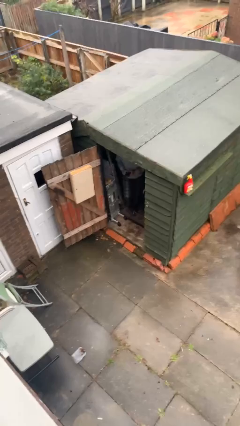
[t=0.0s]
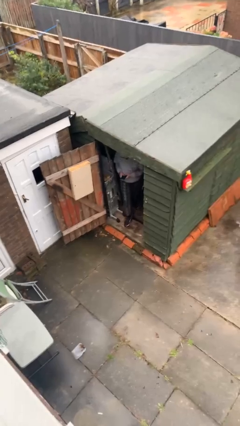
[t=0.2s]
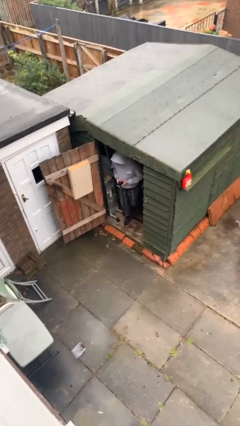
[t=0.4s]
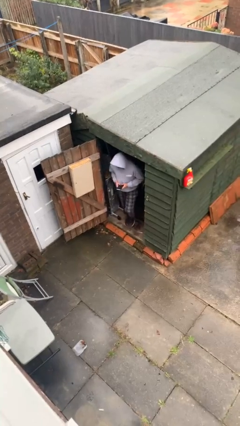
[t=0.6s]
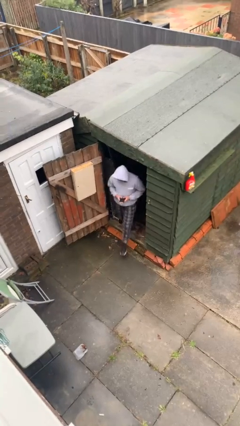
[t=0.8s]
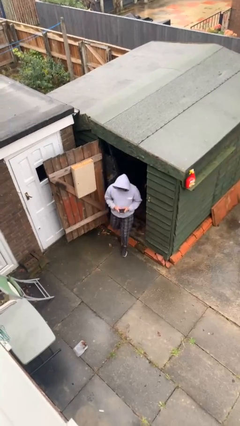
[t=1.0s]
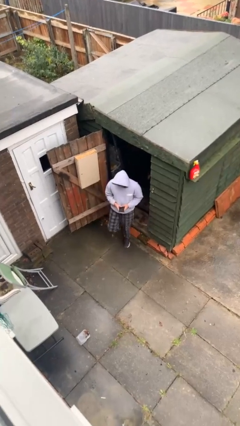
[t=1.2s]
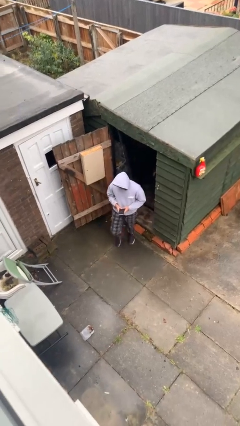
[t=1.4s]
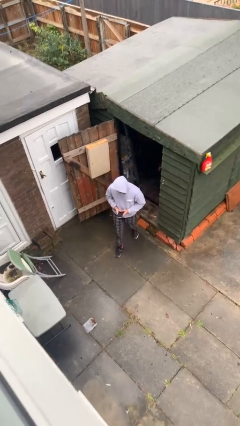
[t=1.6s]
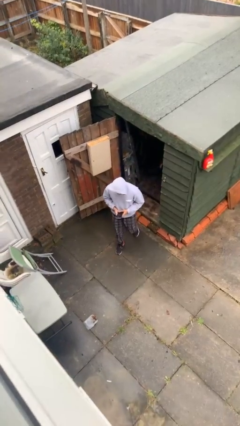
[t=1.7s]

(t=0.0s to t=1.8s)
person enters scene through structure

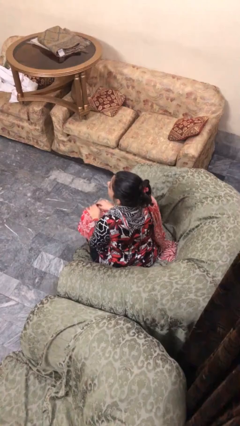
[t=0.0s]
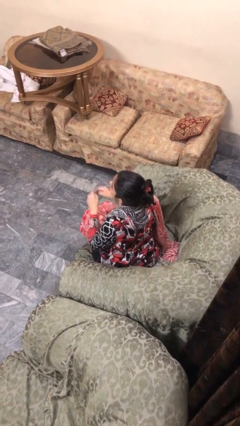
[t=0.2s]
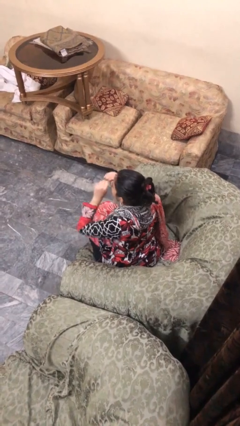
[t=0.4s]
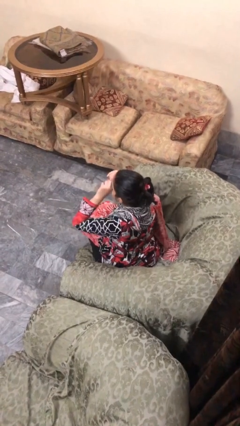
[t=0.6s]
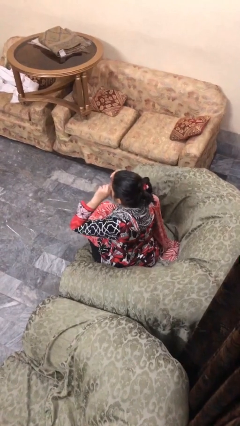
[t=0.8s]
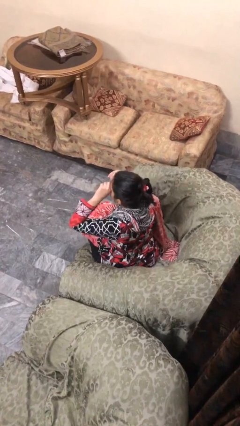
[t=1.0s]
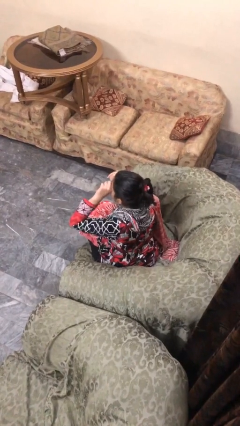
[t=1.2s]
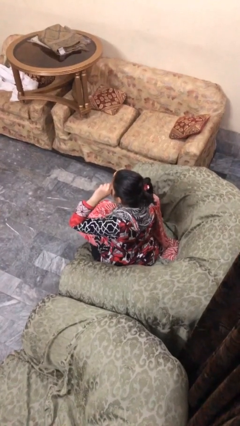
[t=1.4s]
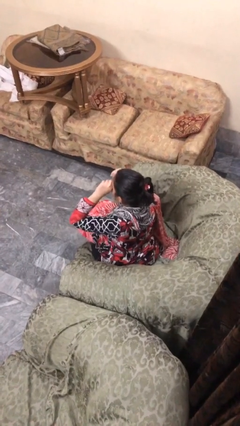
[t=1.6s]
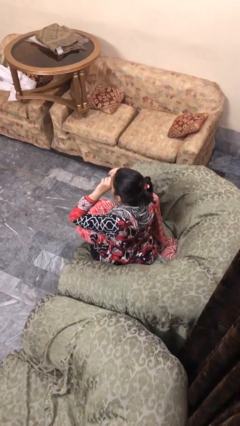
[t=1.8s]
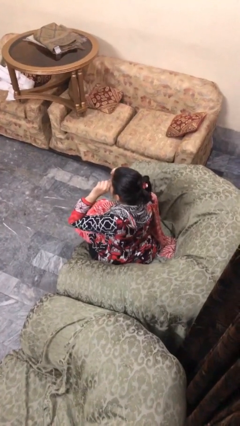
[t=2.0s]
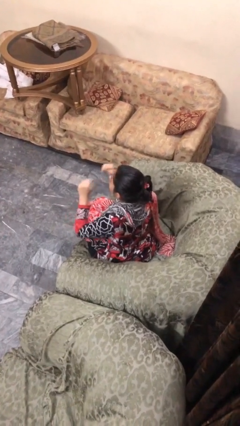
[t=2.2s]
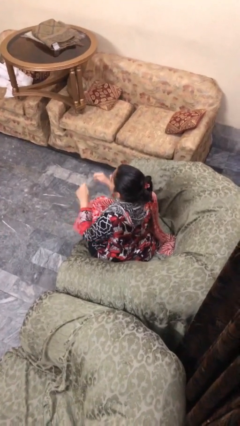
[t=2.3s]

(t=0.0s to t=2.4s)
person rubs eyes

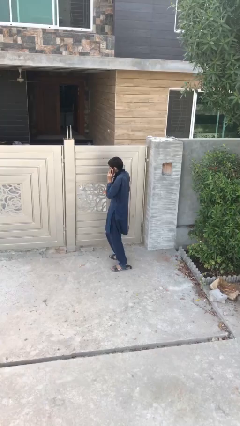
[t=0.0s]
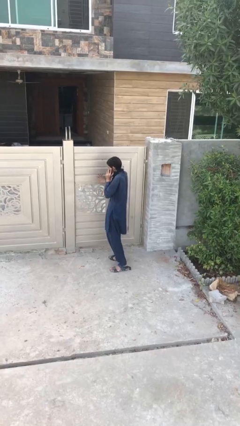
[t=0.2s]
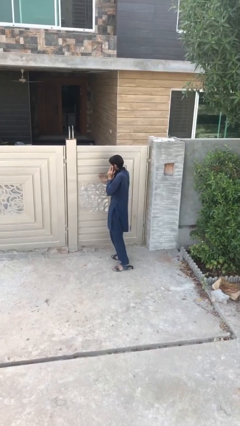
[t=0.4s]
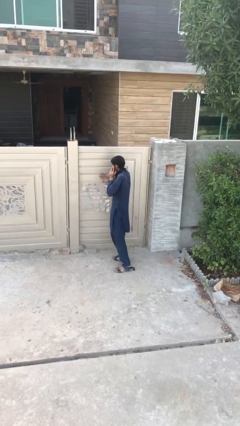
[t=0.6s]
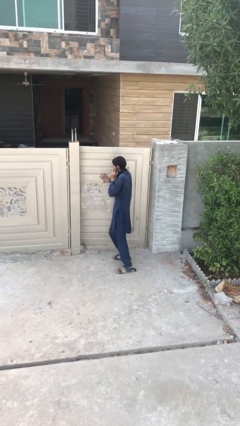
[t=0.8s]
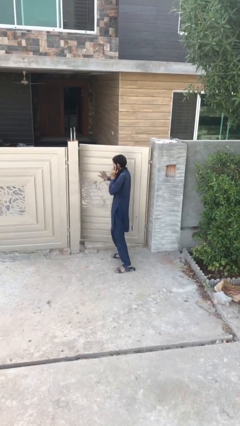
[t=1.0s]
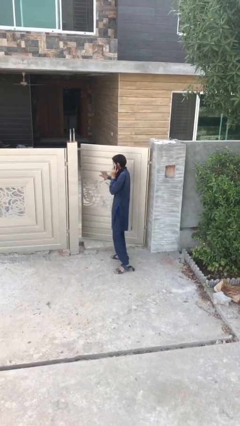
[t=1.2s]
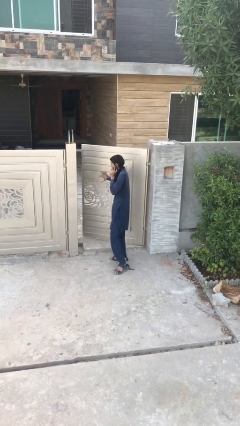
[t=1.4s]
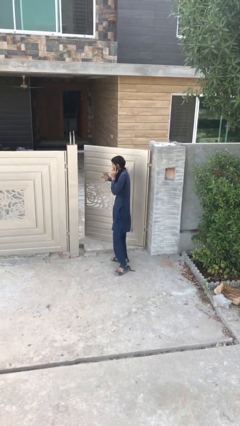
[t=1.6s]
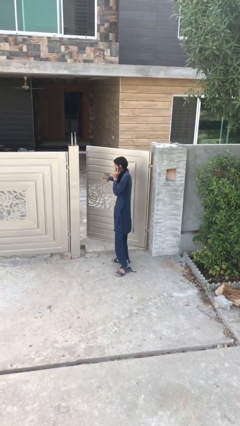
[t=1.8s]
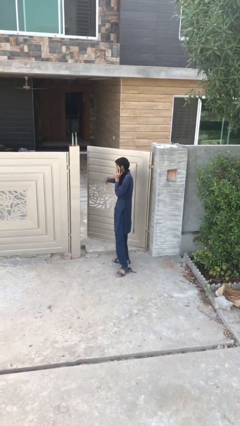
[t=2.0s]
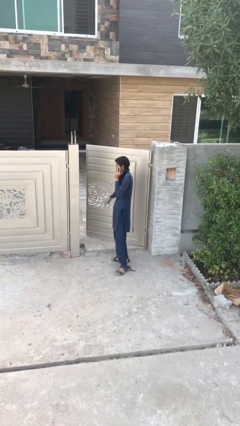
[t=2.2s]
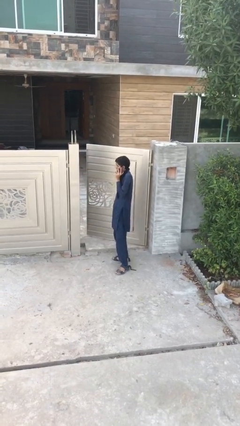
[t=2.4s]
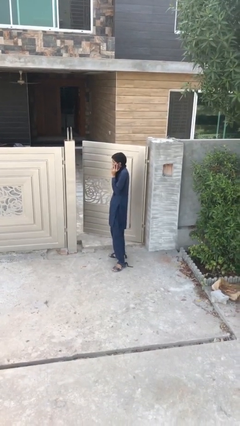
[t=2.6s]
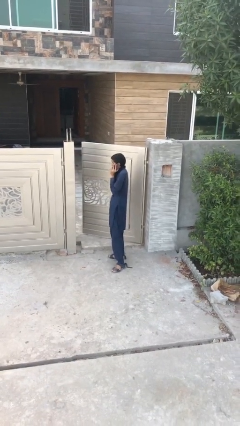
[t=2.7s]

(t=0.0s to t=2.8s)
person opens facility door

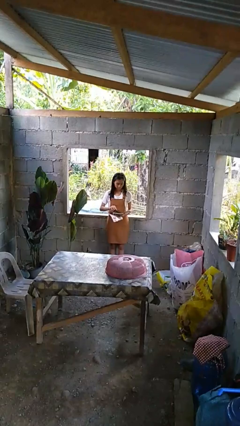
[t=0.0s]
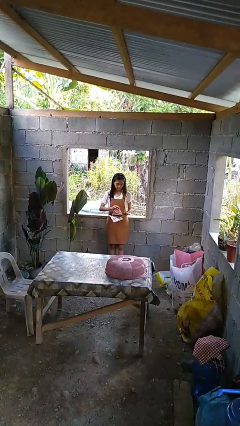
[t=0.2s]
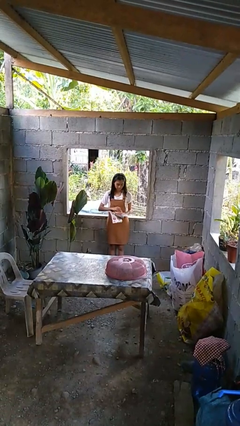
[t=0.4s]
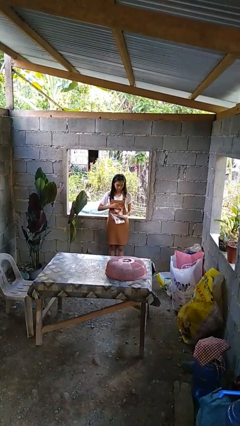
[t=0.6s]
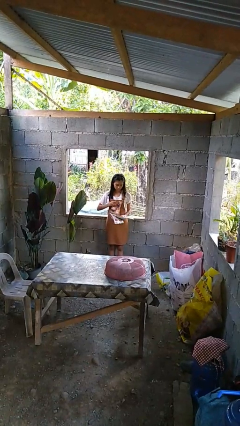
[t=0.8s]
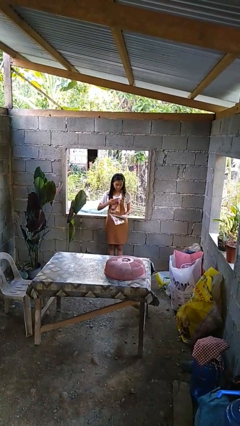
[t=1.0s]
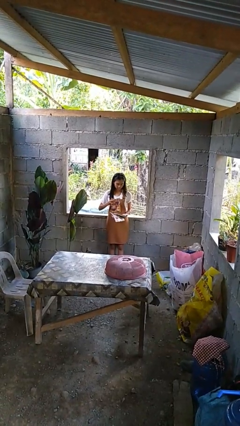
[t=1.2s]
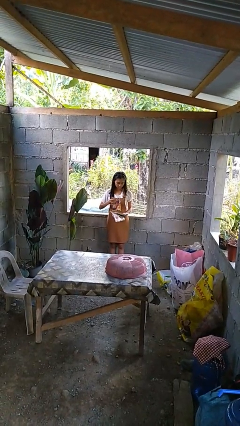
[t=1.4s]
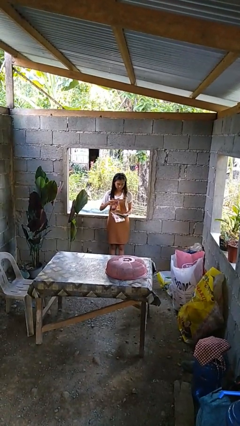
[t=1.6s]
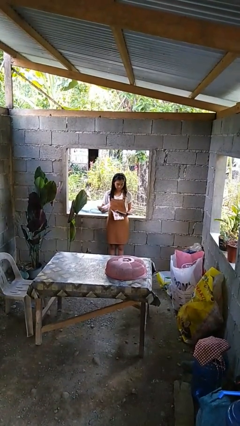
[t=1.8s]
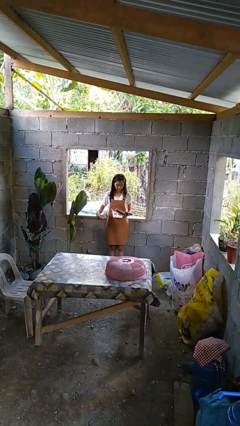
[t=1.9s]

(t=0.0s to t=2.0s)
person tears paper

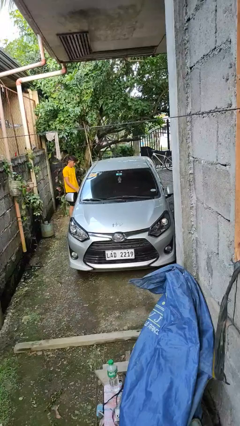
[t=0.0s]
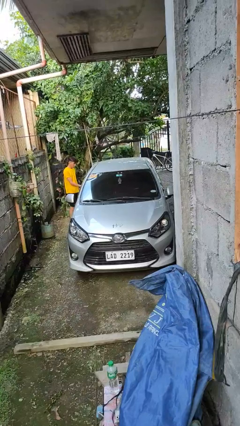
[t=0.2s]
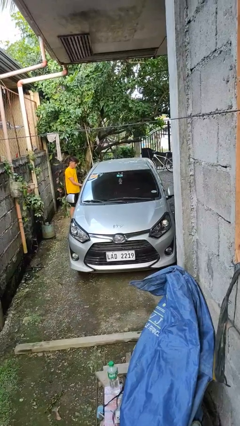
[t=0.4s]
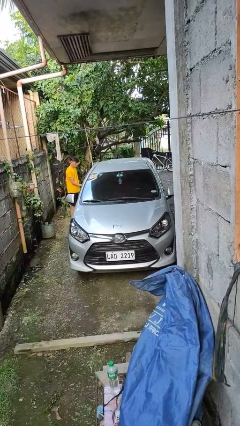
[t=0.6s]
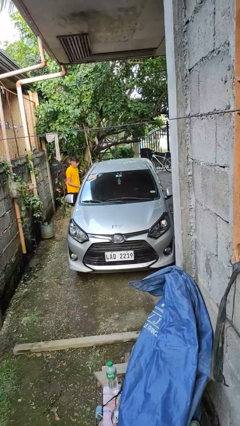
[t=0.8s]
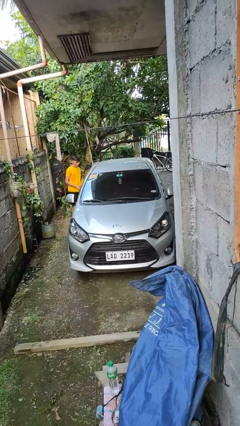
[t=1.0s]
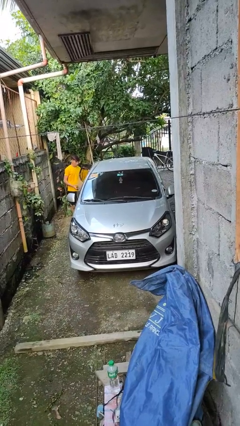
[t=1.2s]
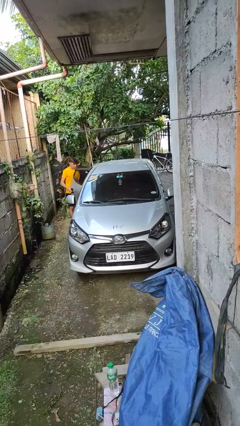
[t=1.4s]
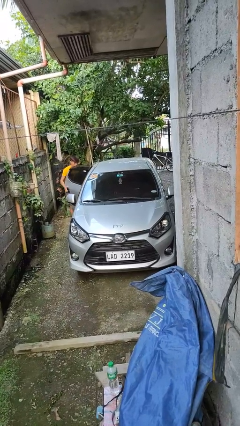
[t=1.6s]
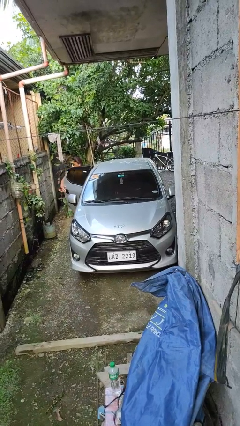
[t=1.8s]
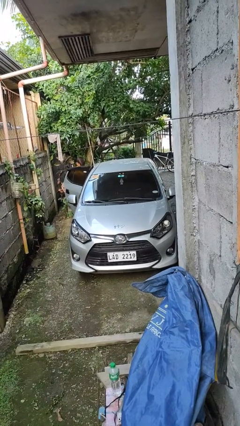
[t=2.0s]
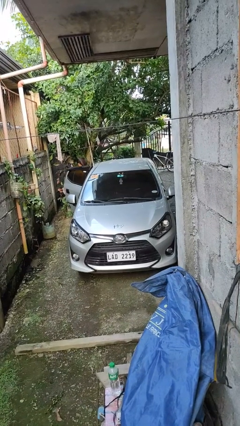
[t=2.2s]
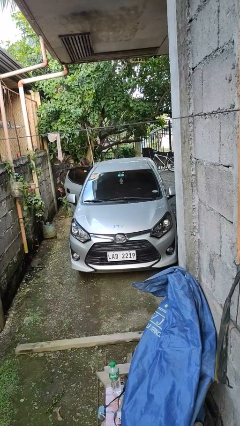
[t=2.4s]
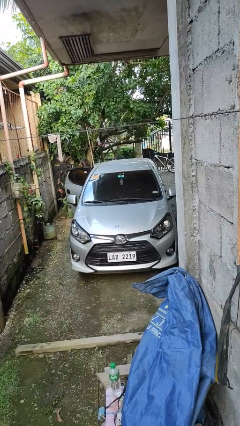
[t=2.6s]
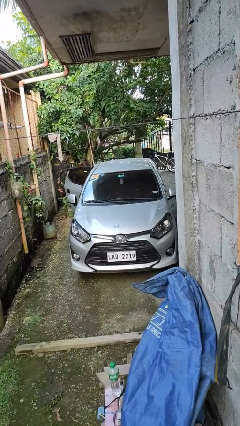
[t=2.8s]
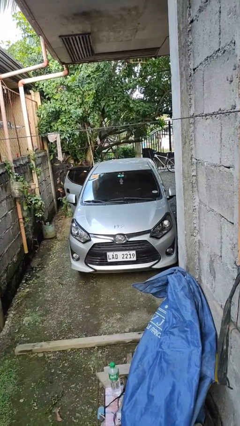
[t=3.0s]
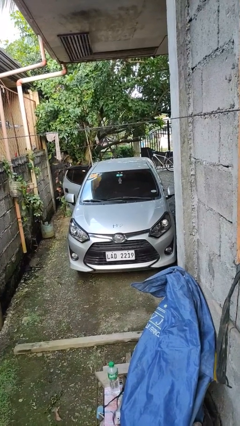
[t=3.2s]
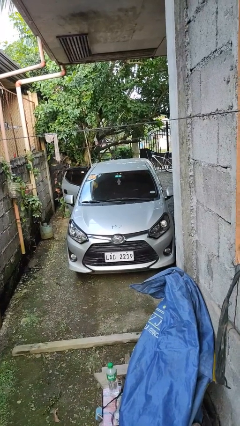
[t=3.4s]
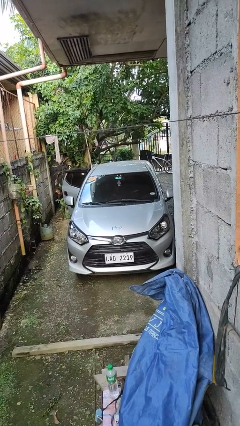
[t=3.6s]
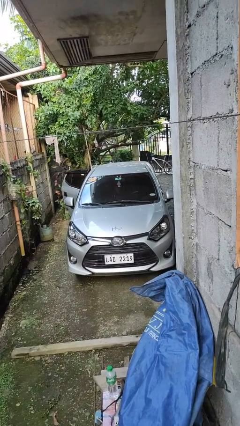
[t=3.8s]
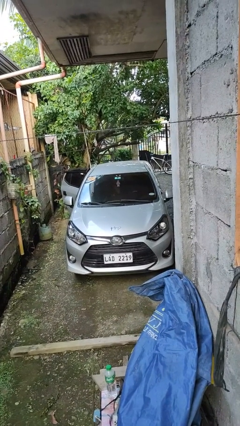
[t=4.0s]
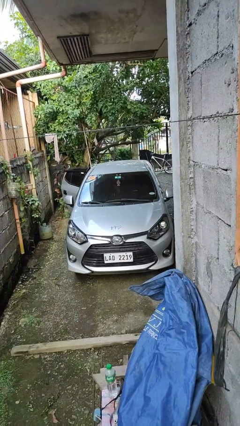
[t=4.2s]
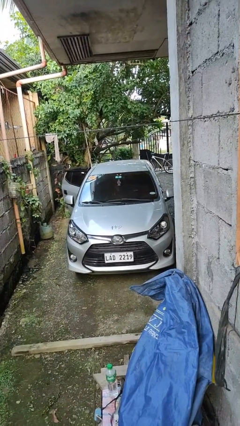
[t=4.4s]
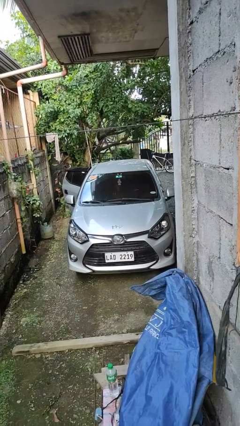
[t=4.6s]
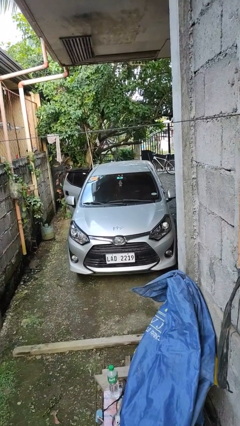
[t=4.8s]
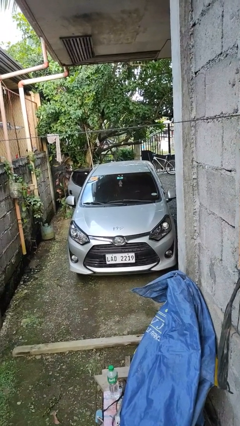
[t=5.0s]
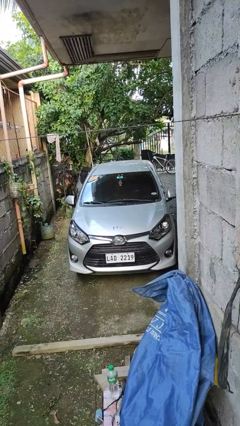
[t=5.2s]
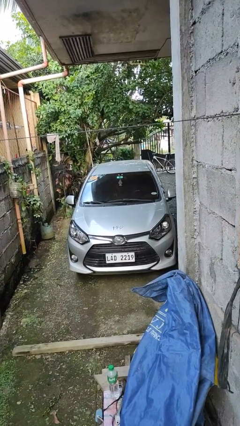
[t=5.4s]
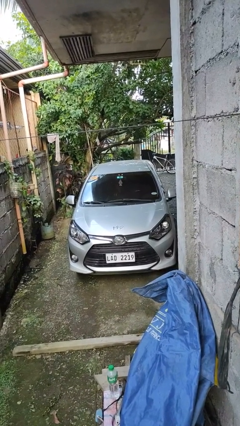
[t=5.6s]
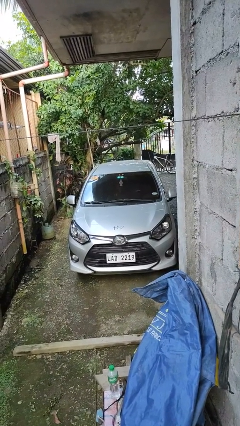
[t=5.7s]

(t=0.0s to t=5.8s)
car picks up person

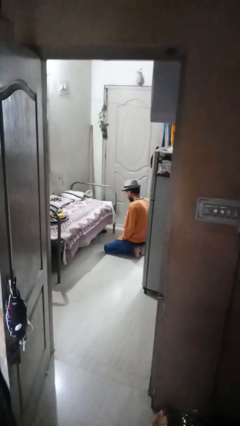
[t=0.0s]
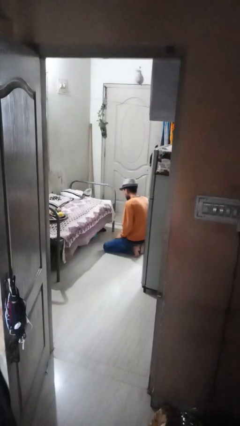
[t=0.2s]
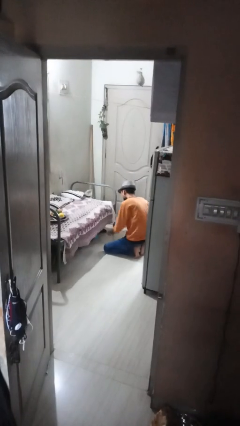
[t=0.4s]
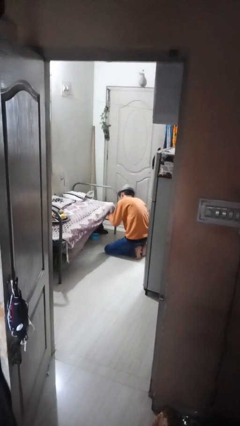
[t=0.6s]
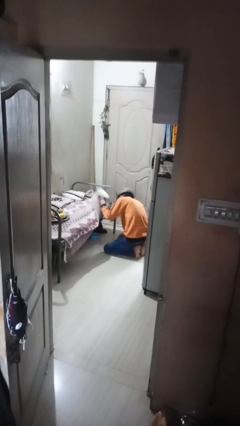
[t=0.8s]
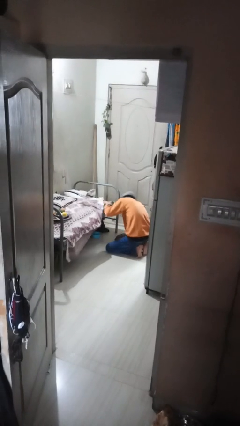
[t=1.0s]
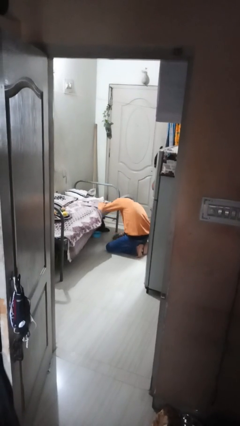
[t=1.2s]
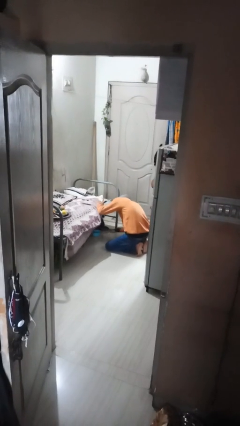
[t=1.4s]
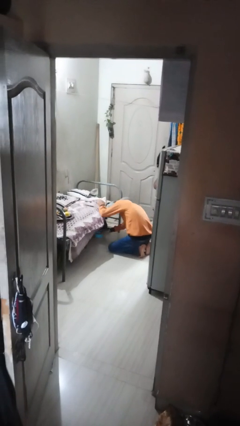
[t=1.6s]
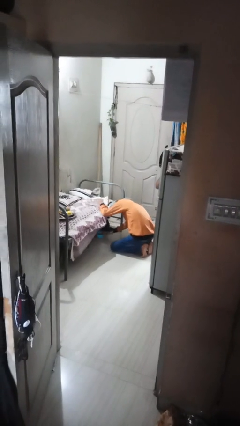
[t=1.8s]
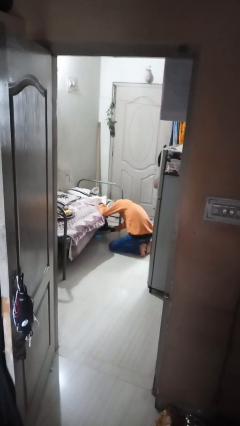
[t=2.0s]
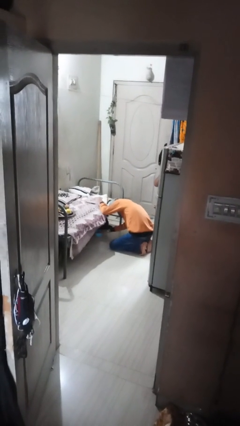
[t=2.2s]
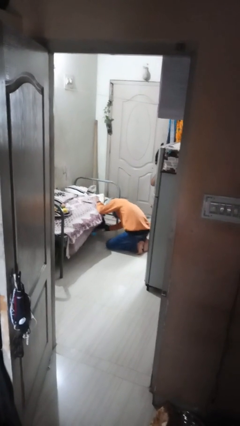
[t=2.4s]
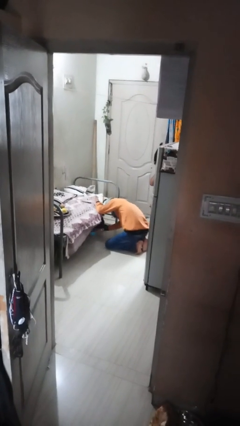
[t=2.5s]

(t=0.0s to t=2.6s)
person searches under bed
